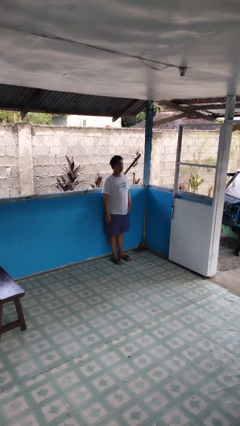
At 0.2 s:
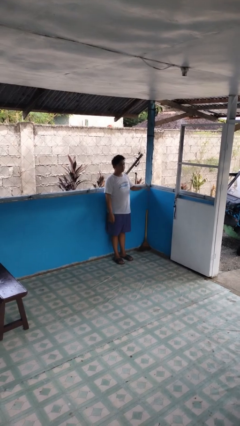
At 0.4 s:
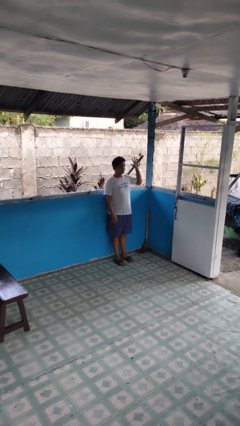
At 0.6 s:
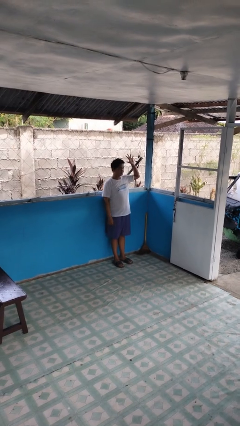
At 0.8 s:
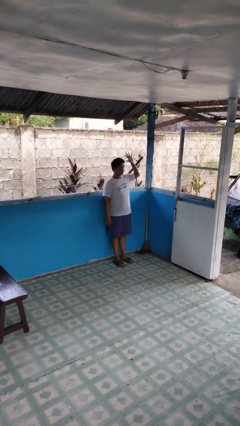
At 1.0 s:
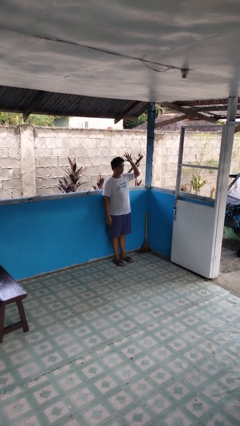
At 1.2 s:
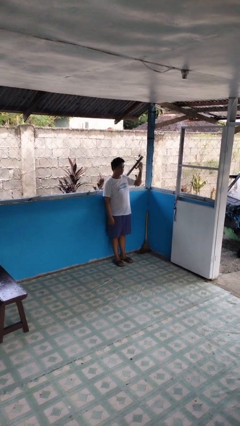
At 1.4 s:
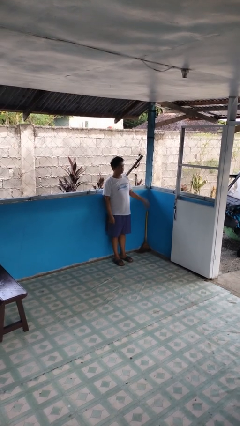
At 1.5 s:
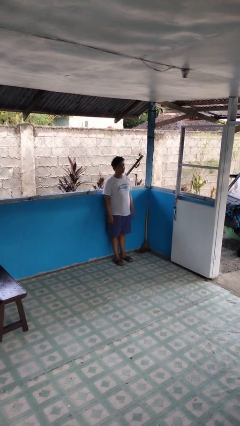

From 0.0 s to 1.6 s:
person gestures number five

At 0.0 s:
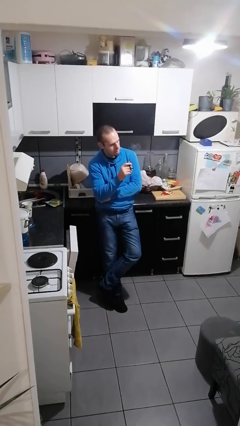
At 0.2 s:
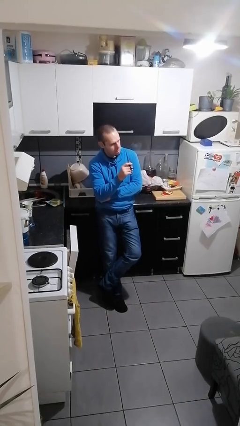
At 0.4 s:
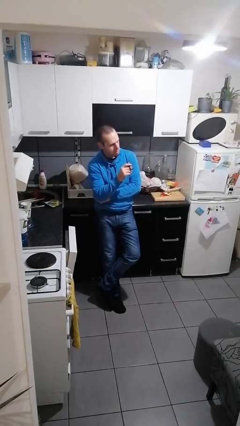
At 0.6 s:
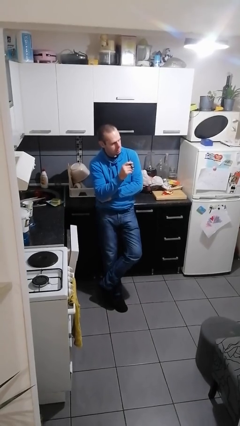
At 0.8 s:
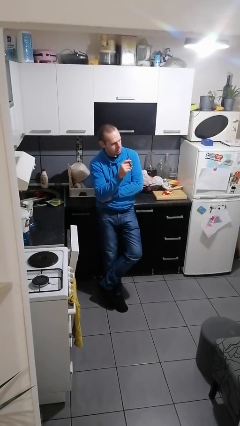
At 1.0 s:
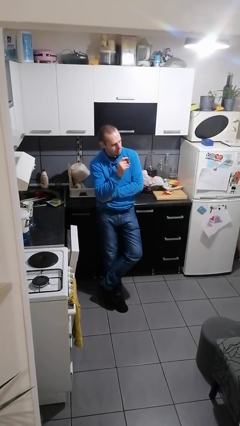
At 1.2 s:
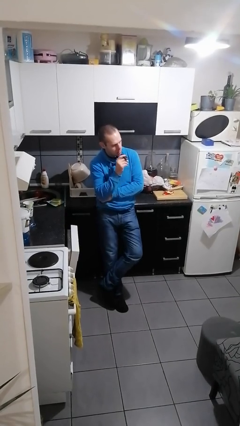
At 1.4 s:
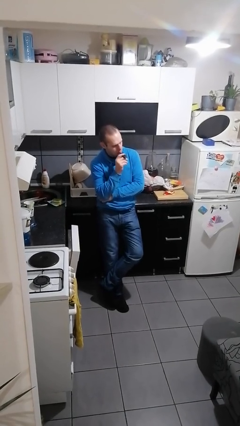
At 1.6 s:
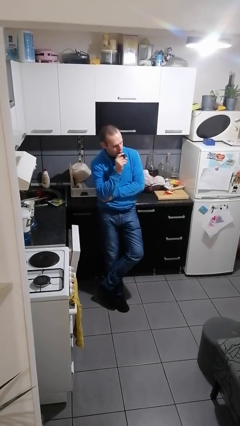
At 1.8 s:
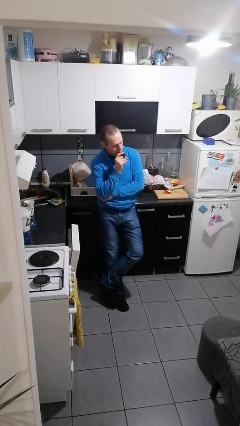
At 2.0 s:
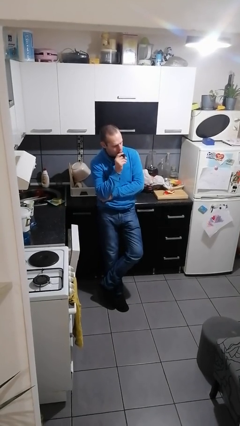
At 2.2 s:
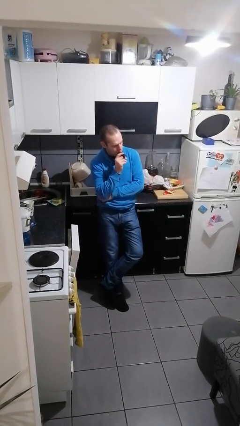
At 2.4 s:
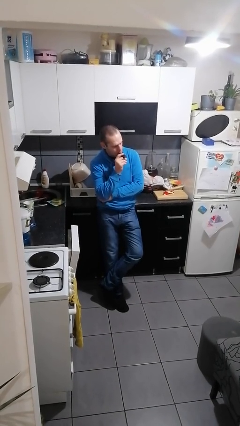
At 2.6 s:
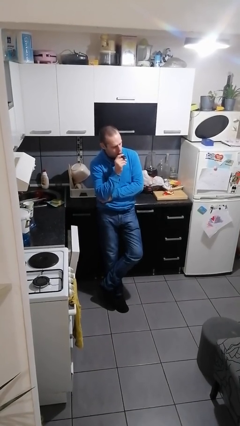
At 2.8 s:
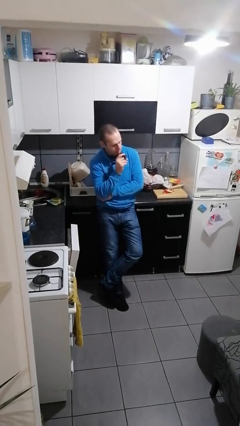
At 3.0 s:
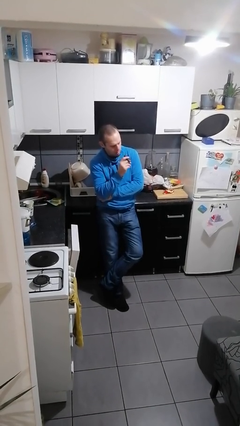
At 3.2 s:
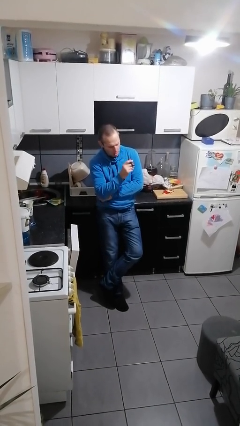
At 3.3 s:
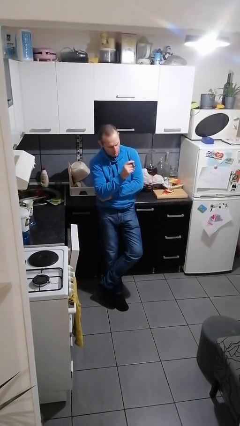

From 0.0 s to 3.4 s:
person vapes

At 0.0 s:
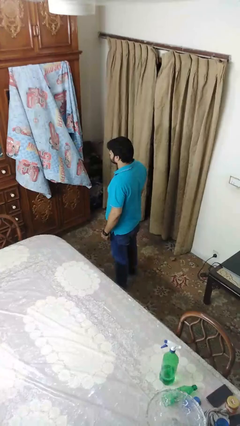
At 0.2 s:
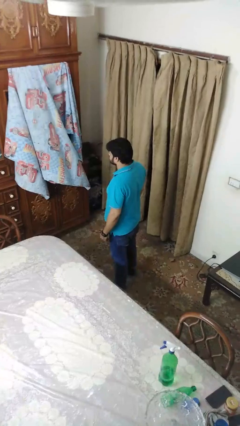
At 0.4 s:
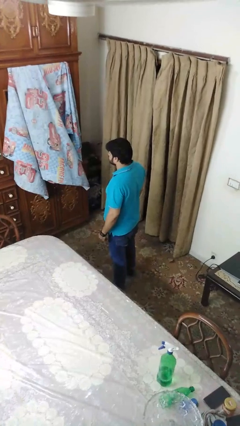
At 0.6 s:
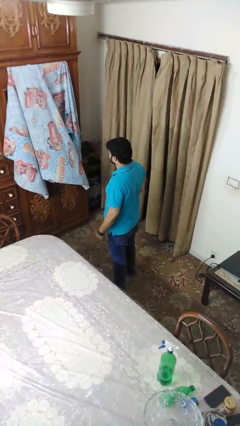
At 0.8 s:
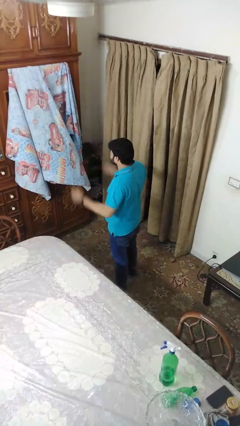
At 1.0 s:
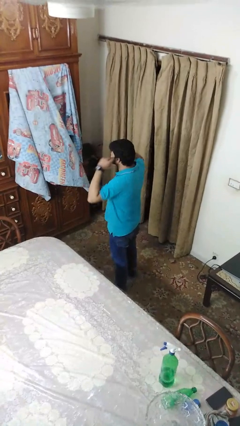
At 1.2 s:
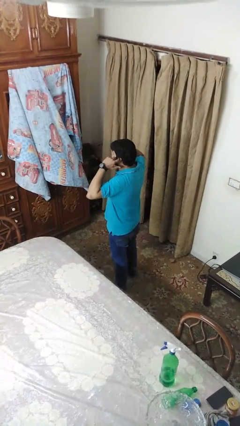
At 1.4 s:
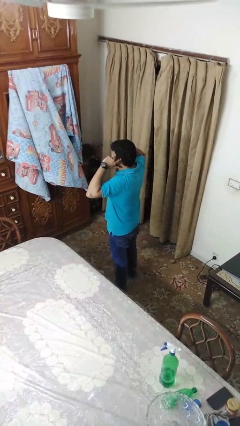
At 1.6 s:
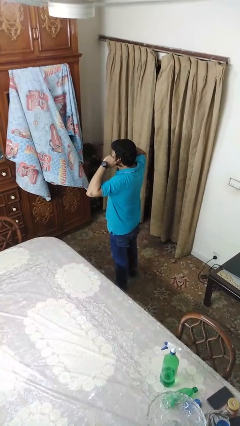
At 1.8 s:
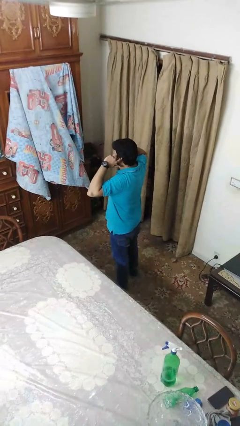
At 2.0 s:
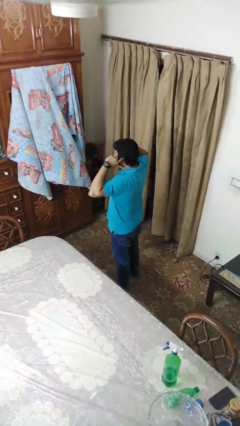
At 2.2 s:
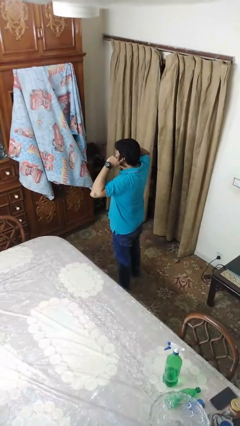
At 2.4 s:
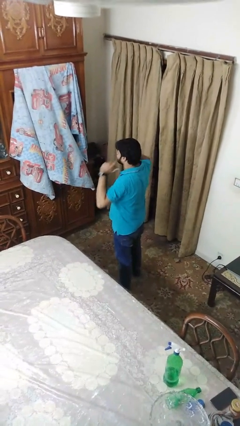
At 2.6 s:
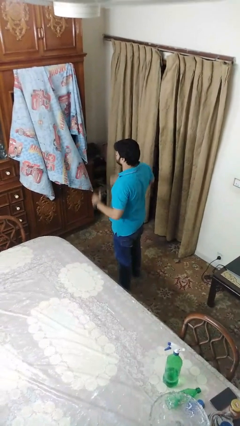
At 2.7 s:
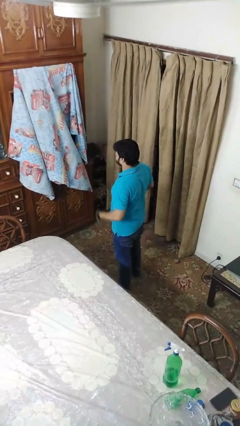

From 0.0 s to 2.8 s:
person puts fingers in ear

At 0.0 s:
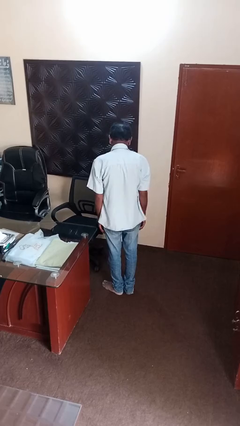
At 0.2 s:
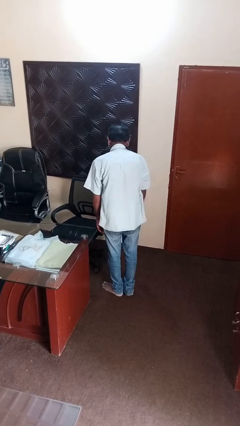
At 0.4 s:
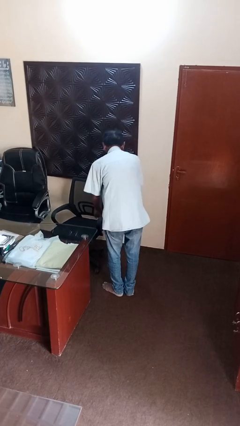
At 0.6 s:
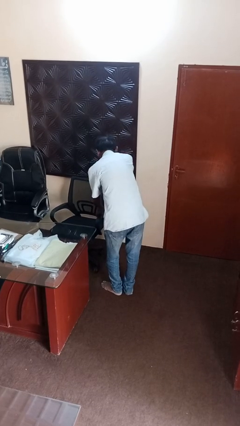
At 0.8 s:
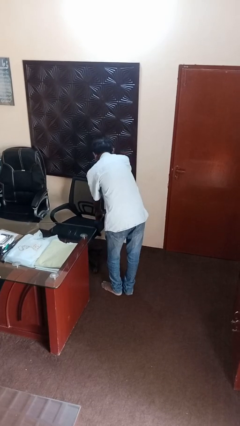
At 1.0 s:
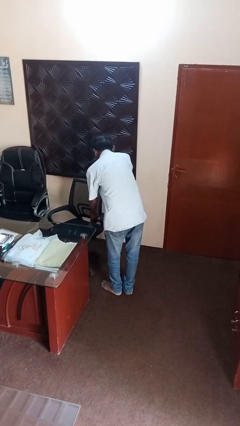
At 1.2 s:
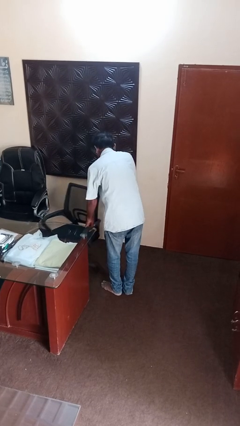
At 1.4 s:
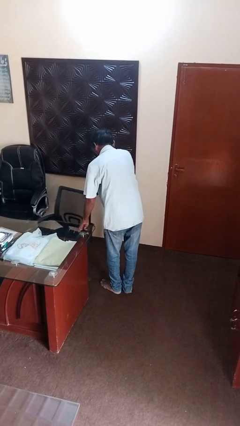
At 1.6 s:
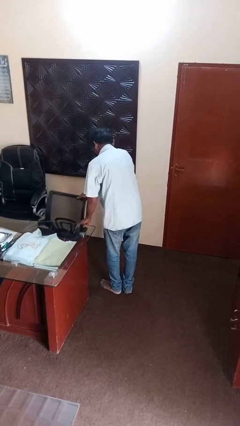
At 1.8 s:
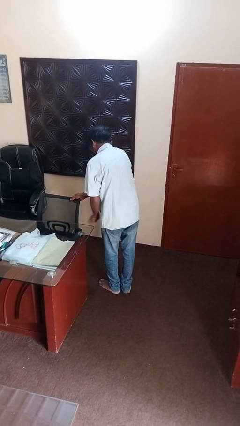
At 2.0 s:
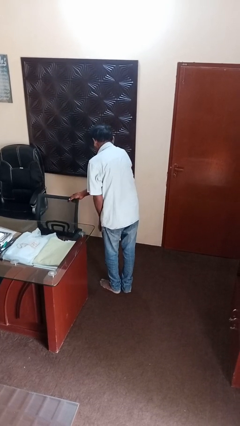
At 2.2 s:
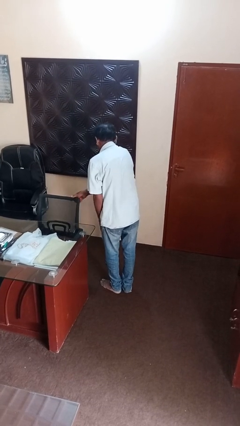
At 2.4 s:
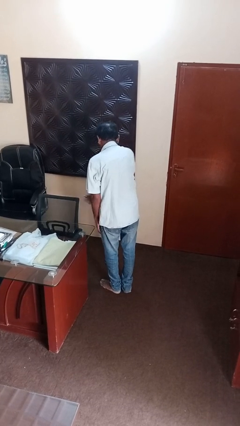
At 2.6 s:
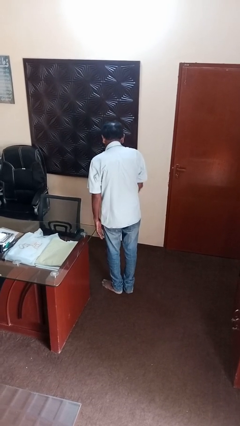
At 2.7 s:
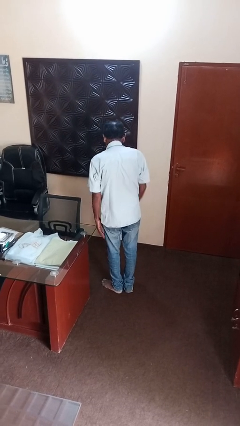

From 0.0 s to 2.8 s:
person pushes in chair

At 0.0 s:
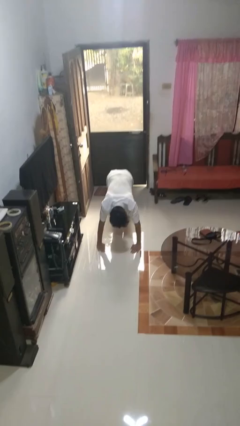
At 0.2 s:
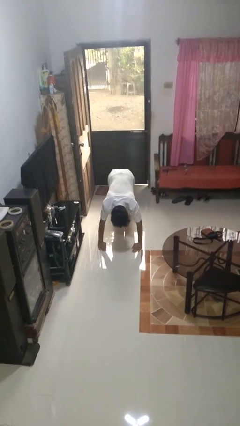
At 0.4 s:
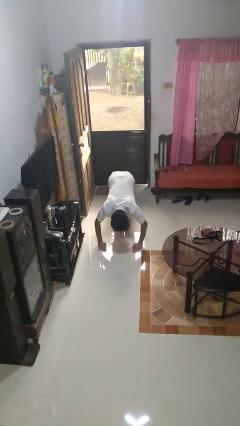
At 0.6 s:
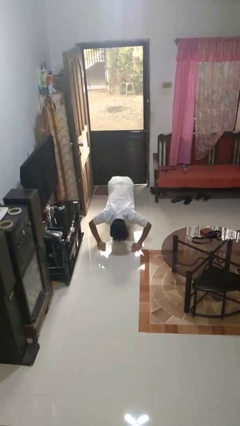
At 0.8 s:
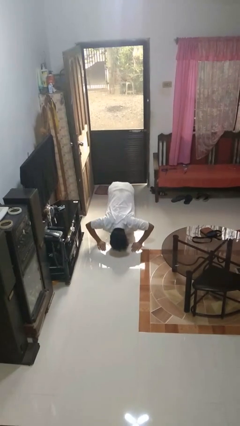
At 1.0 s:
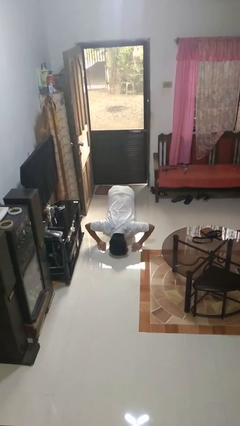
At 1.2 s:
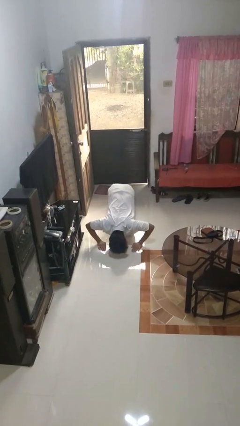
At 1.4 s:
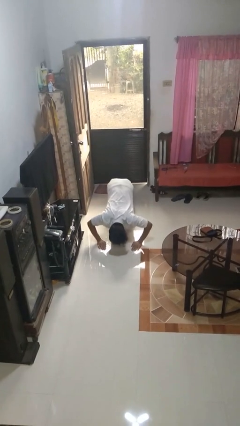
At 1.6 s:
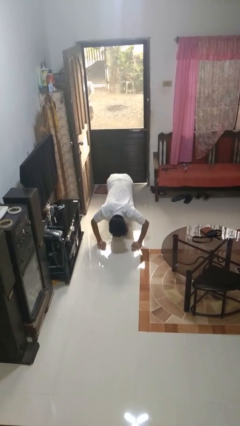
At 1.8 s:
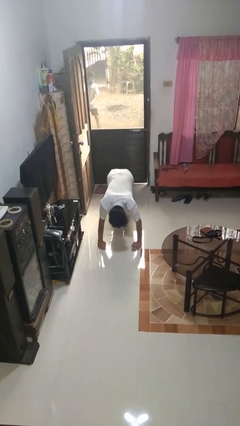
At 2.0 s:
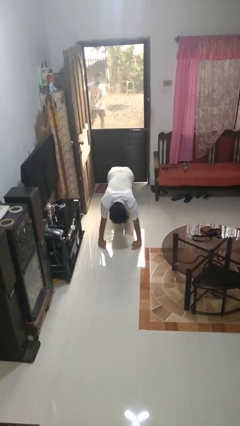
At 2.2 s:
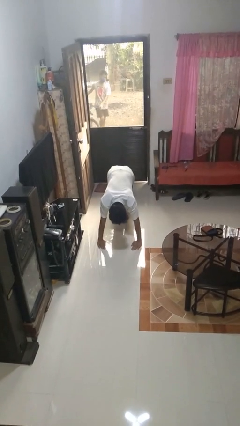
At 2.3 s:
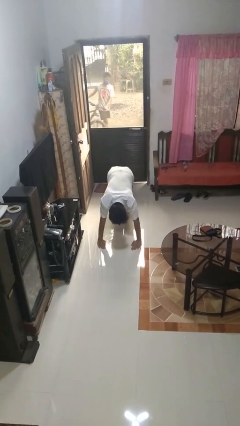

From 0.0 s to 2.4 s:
person exercises with pushup

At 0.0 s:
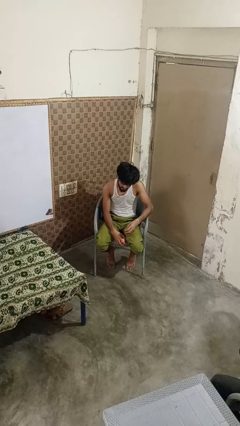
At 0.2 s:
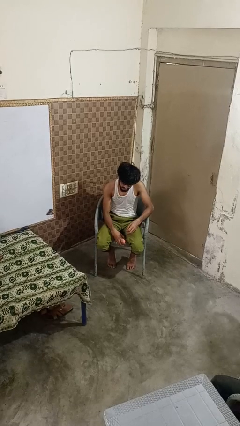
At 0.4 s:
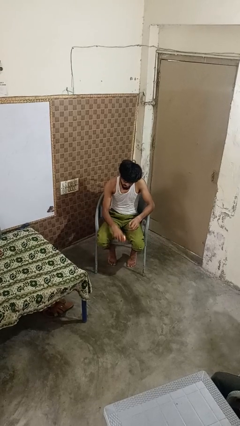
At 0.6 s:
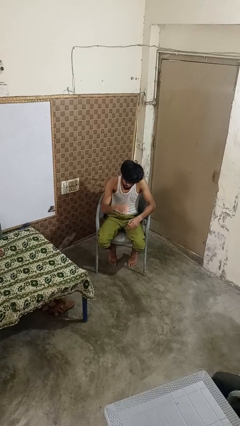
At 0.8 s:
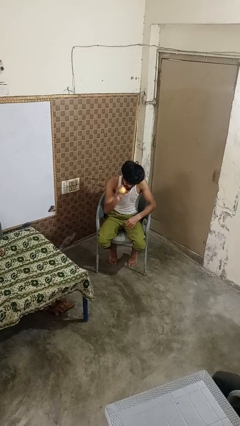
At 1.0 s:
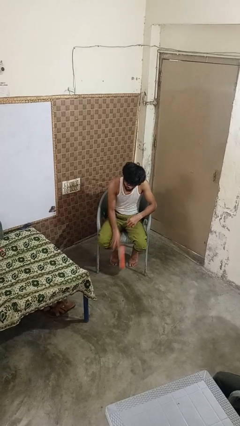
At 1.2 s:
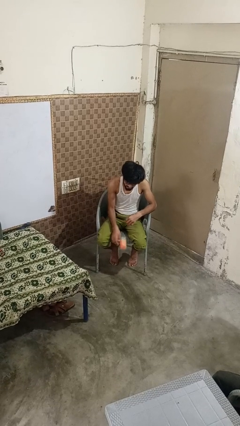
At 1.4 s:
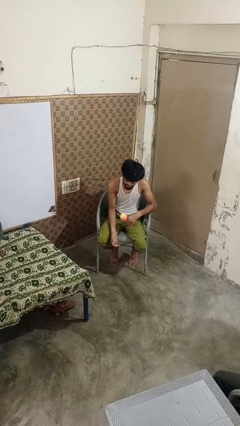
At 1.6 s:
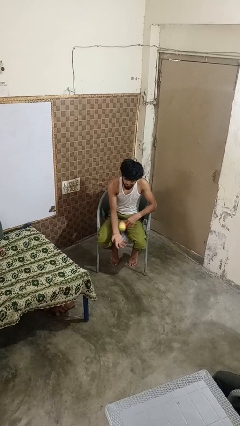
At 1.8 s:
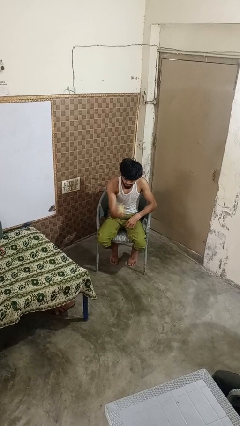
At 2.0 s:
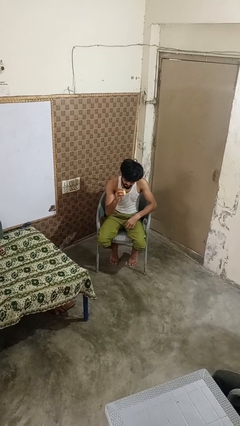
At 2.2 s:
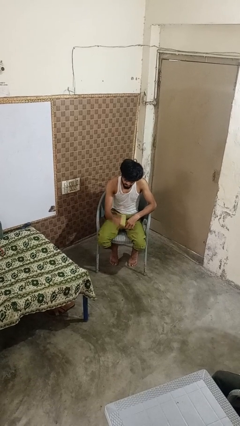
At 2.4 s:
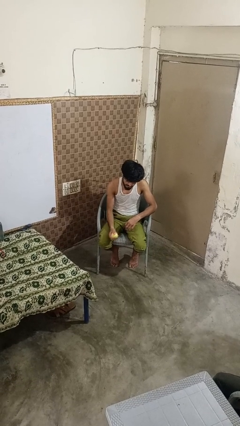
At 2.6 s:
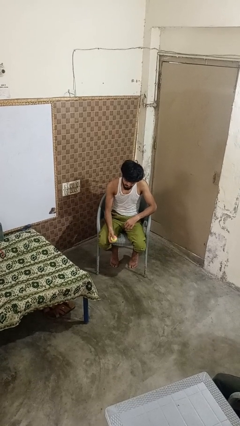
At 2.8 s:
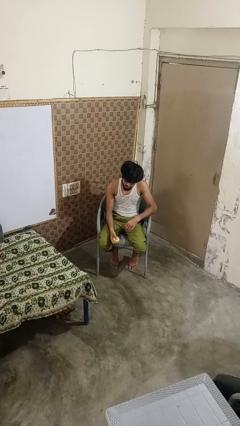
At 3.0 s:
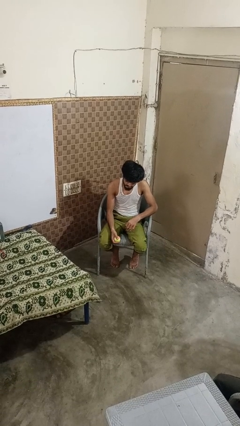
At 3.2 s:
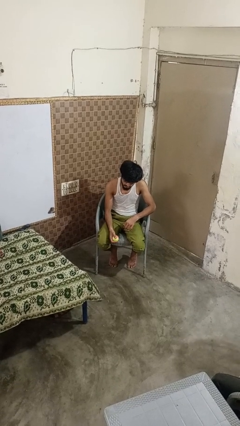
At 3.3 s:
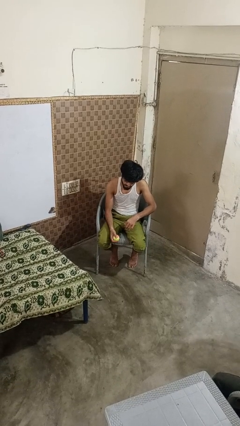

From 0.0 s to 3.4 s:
person bounces ball on floor

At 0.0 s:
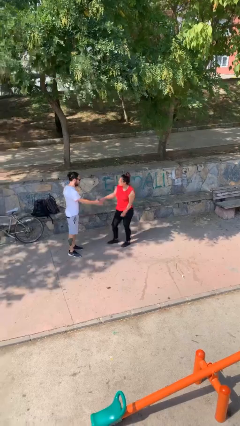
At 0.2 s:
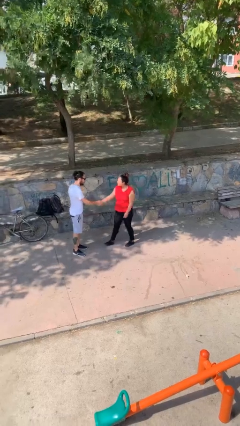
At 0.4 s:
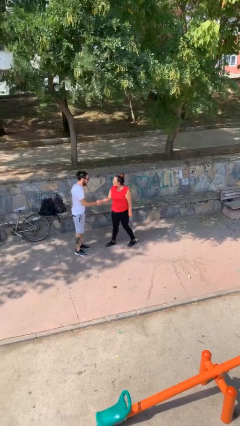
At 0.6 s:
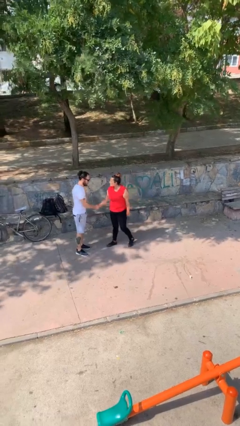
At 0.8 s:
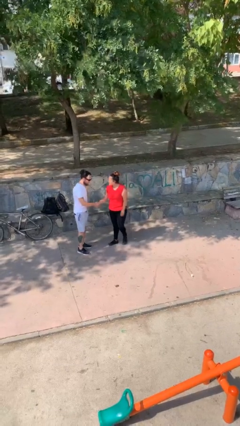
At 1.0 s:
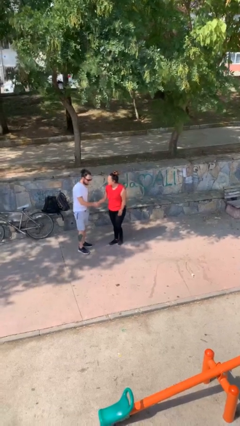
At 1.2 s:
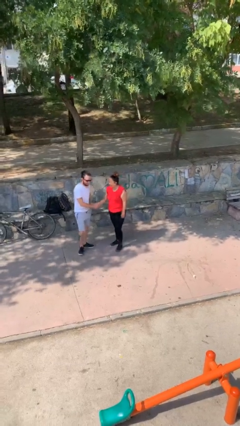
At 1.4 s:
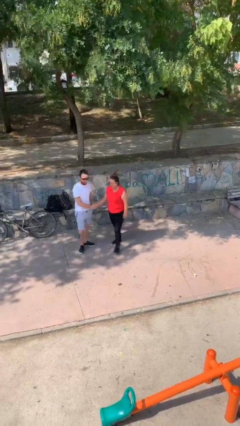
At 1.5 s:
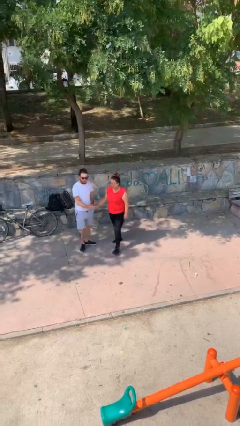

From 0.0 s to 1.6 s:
person shakes hand
